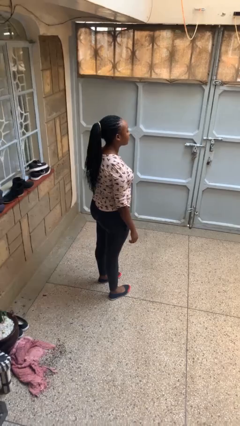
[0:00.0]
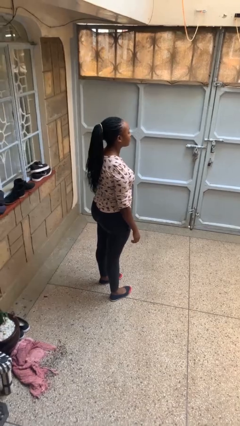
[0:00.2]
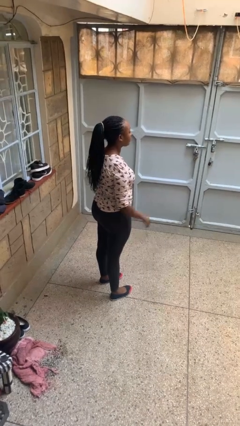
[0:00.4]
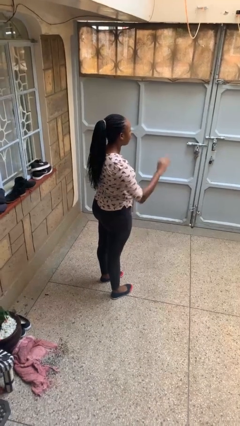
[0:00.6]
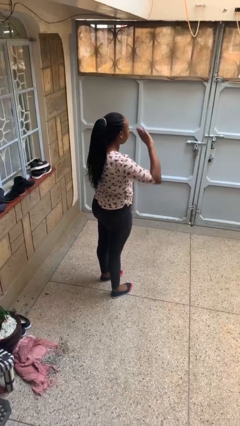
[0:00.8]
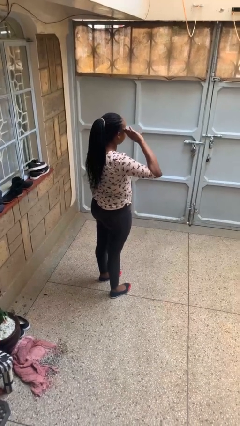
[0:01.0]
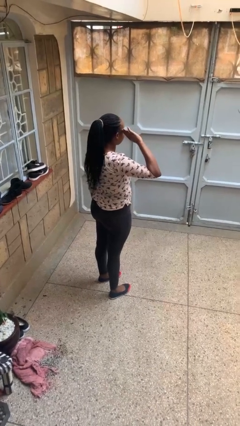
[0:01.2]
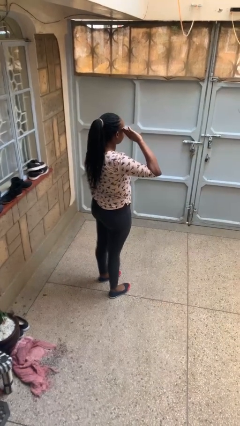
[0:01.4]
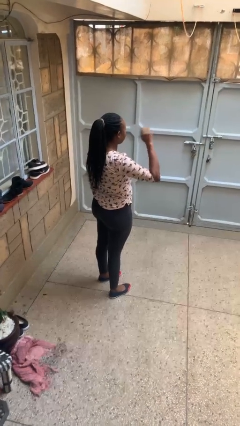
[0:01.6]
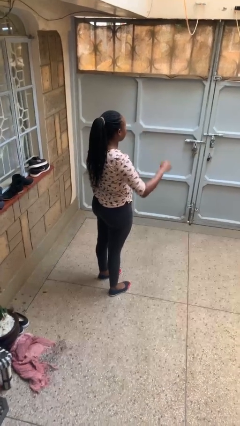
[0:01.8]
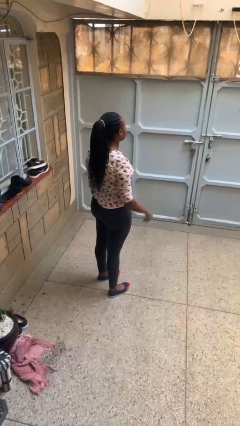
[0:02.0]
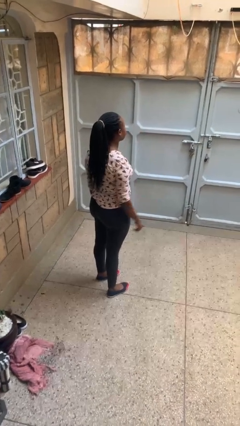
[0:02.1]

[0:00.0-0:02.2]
person salutes

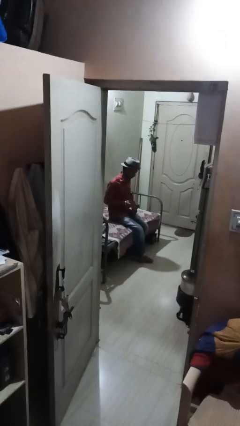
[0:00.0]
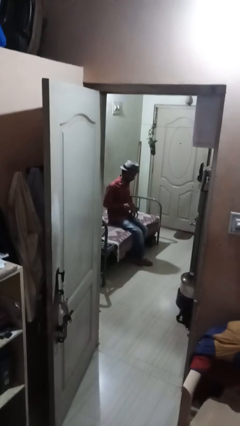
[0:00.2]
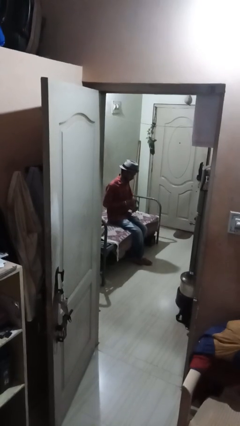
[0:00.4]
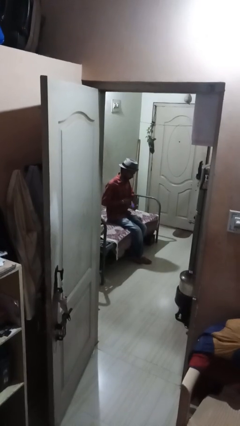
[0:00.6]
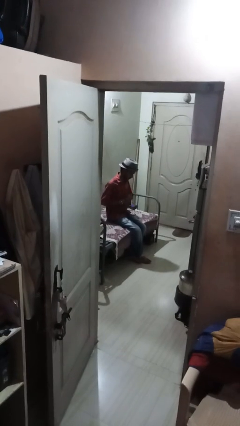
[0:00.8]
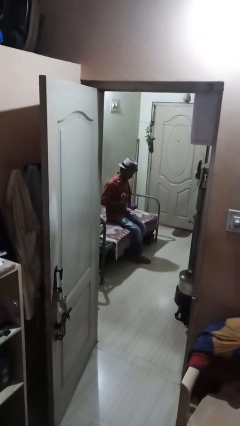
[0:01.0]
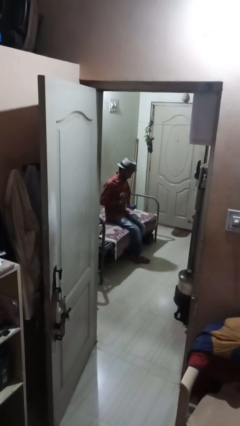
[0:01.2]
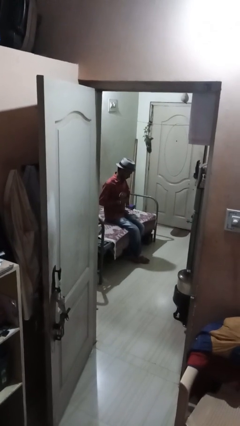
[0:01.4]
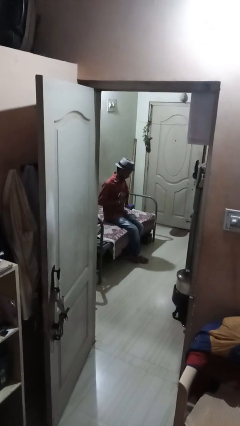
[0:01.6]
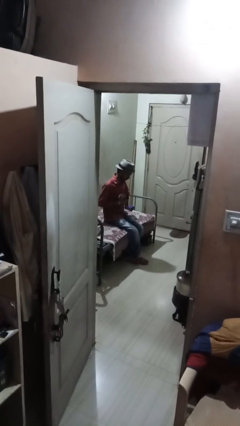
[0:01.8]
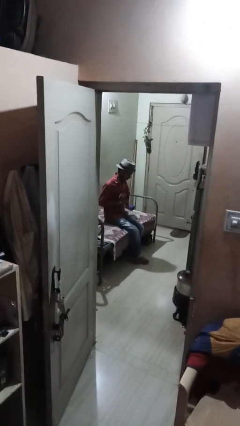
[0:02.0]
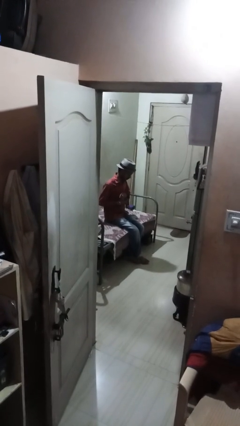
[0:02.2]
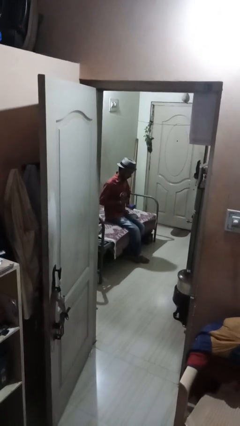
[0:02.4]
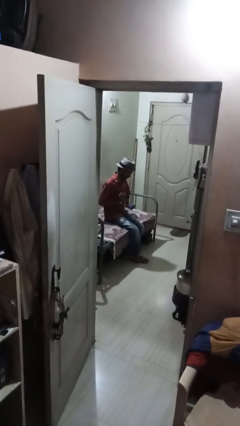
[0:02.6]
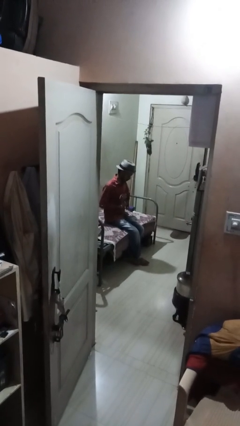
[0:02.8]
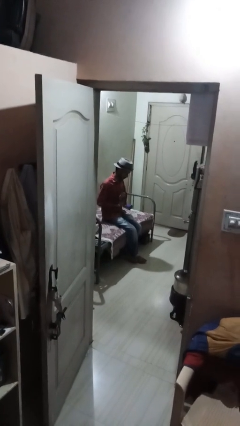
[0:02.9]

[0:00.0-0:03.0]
person puts on wristwatch

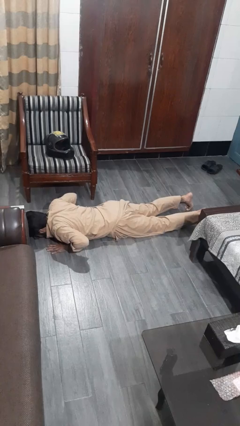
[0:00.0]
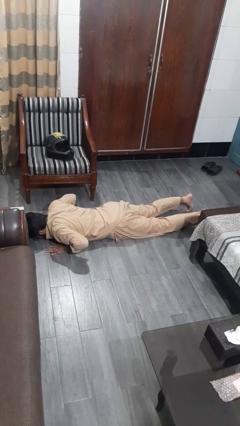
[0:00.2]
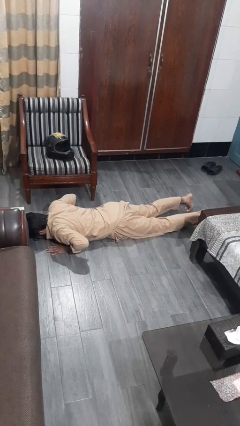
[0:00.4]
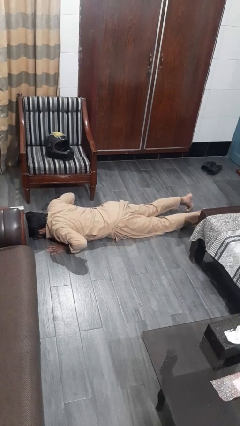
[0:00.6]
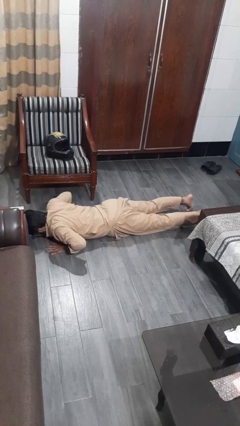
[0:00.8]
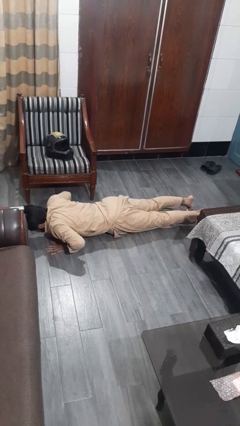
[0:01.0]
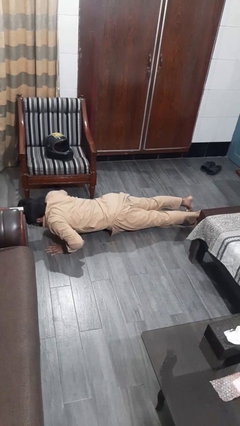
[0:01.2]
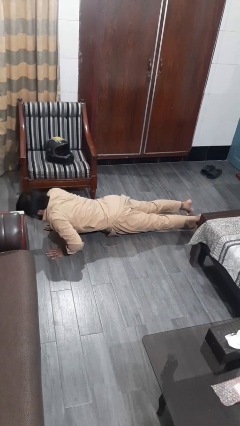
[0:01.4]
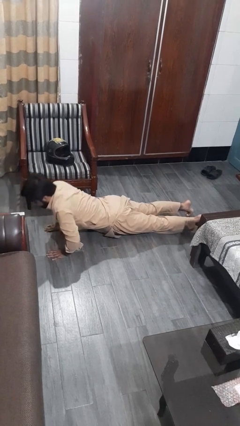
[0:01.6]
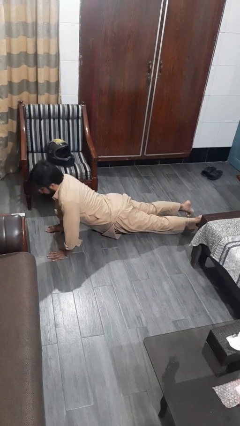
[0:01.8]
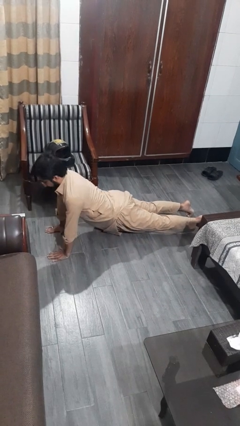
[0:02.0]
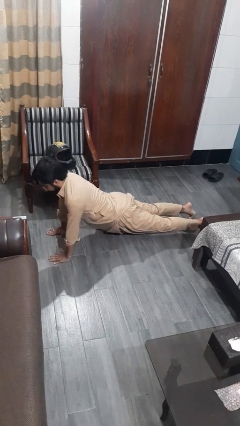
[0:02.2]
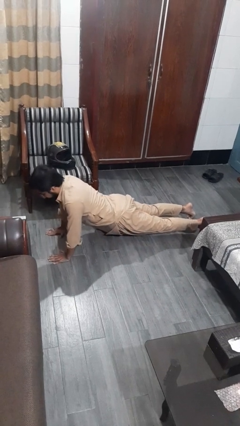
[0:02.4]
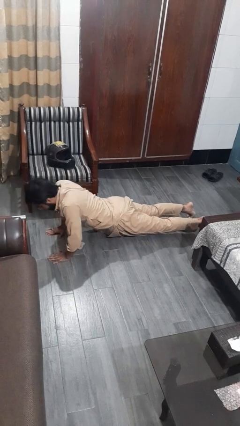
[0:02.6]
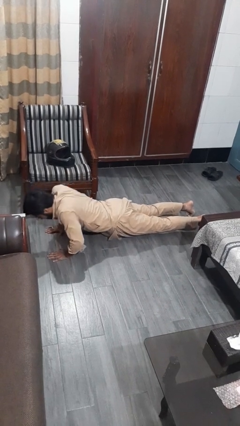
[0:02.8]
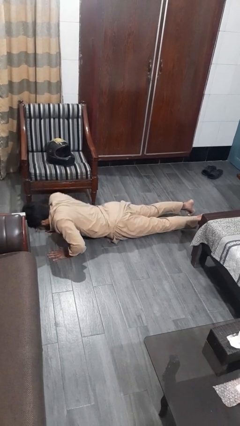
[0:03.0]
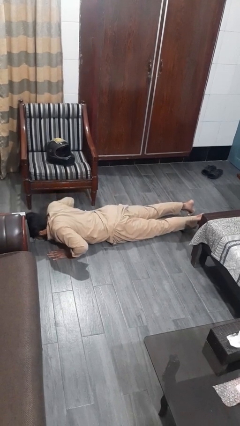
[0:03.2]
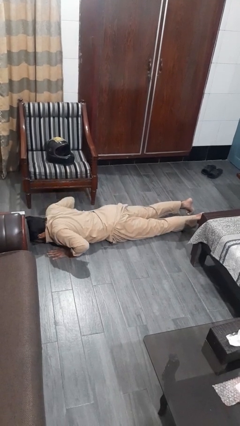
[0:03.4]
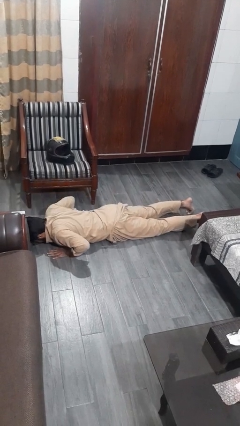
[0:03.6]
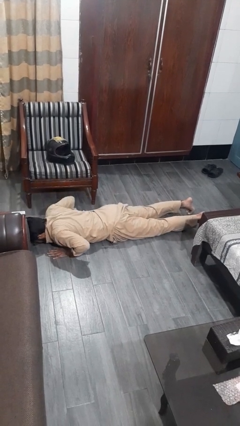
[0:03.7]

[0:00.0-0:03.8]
person exercises with pushup

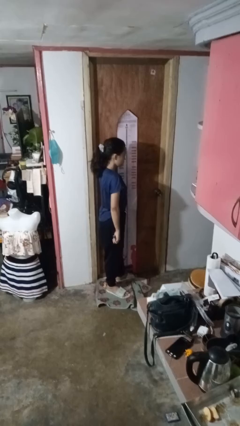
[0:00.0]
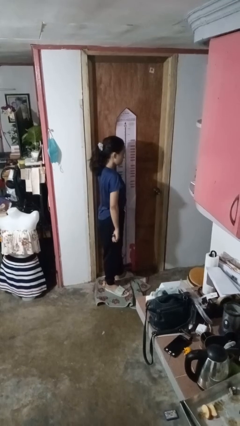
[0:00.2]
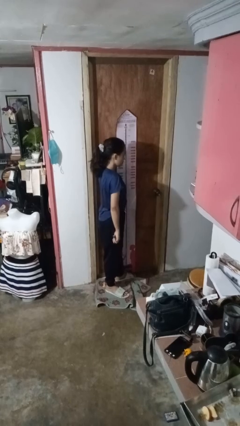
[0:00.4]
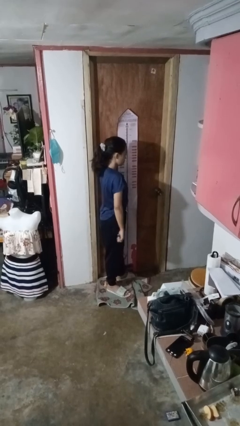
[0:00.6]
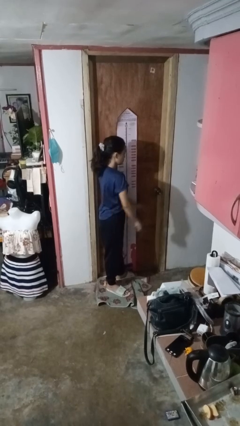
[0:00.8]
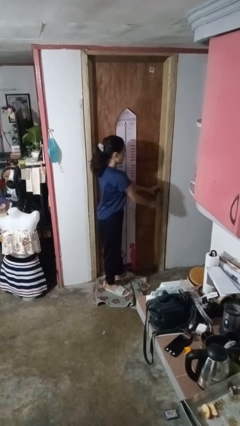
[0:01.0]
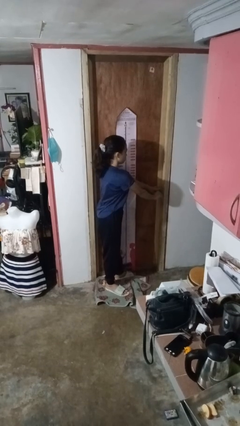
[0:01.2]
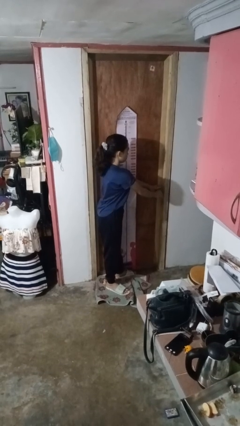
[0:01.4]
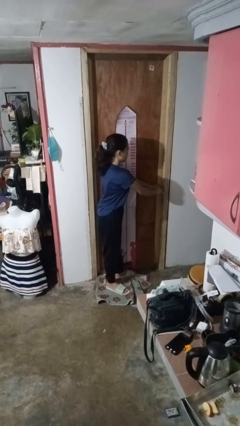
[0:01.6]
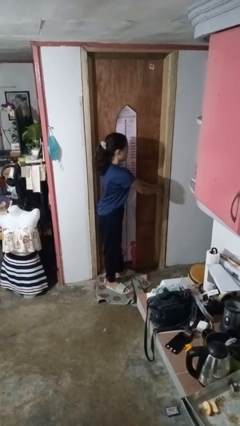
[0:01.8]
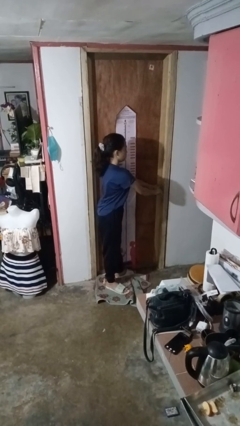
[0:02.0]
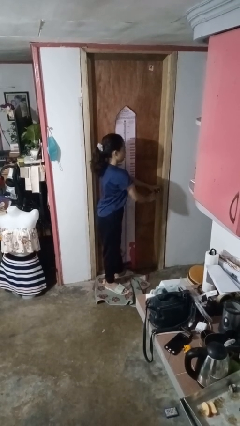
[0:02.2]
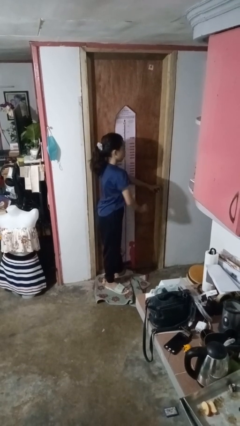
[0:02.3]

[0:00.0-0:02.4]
person unlocks door with keys

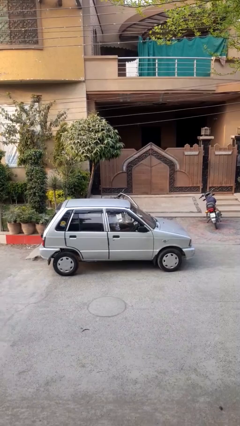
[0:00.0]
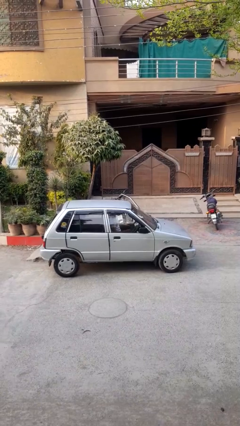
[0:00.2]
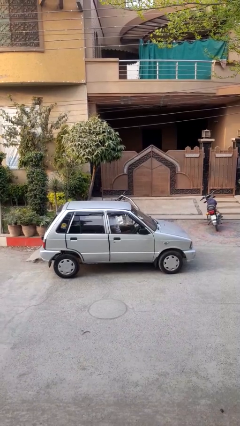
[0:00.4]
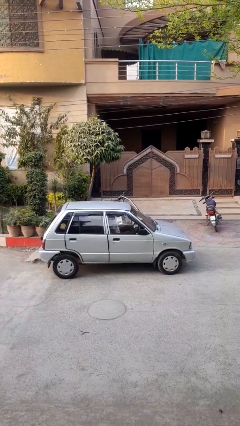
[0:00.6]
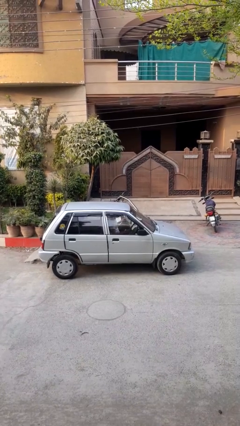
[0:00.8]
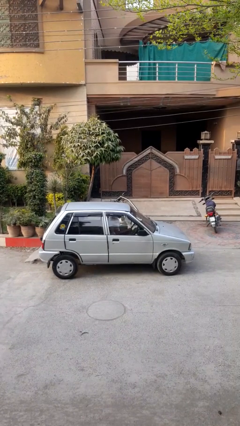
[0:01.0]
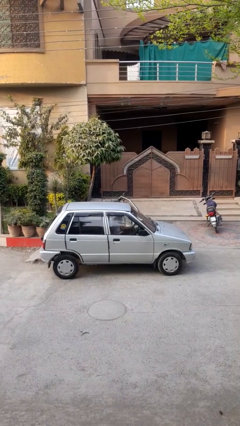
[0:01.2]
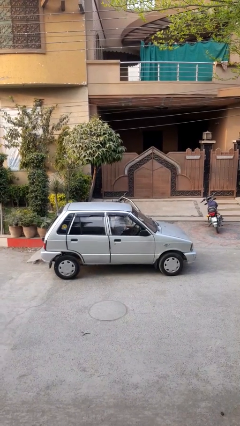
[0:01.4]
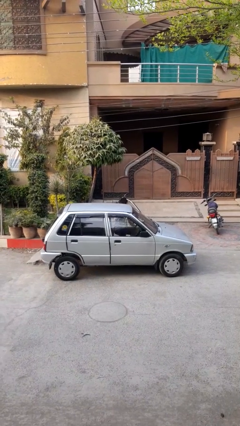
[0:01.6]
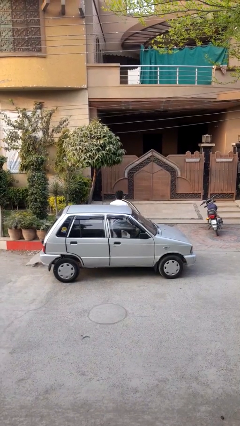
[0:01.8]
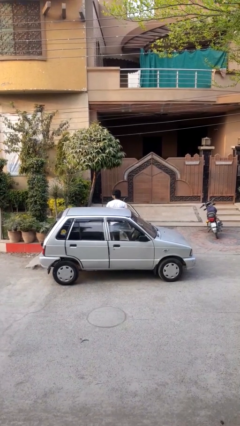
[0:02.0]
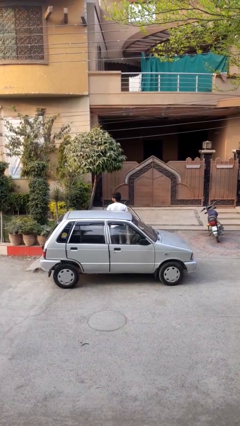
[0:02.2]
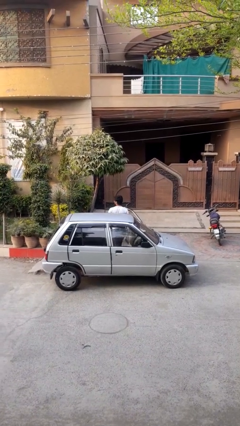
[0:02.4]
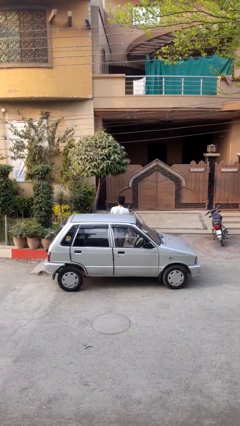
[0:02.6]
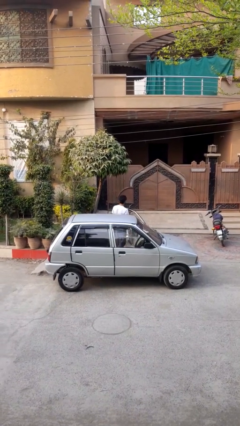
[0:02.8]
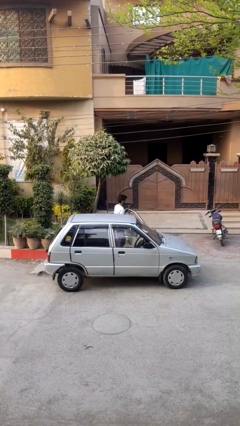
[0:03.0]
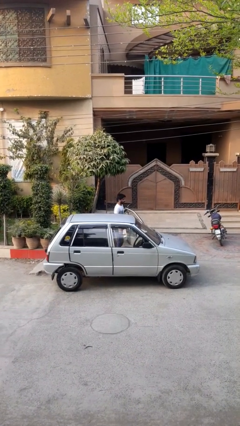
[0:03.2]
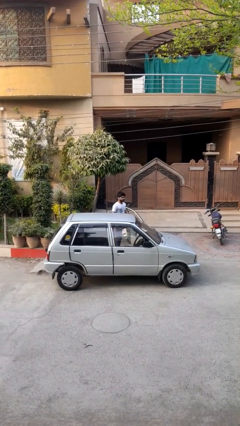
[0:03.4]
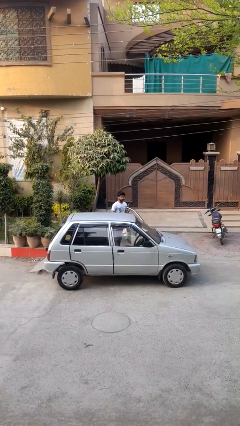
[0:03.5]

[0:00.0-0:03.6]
person exits car

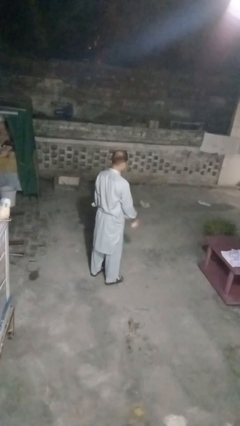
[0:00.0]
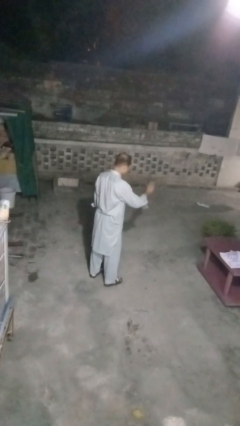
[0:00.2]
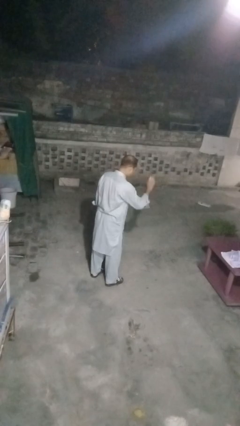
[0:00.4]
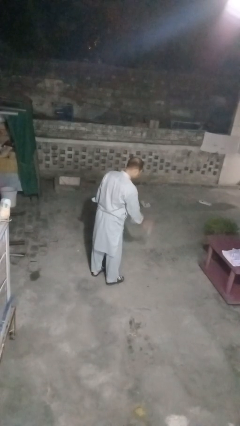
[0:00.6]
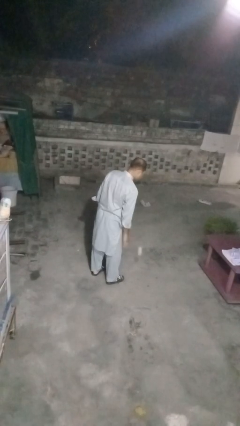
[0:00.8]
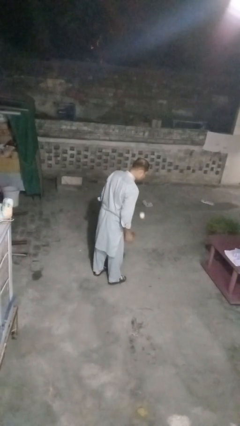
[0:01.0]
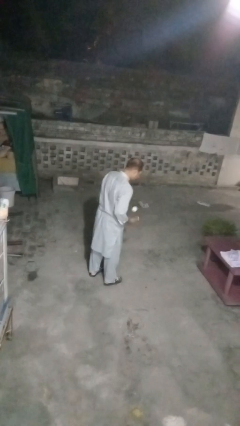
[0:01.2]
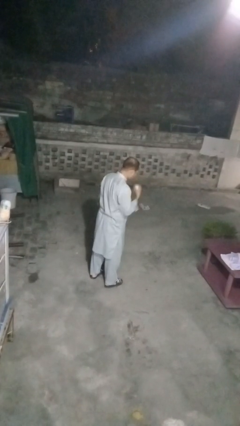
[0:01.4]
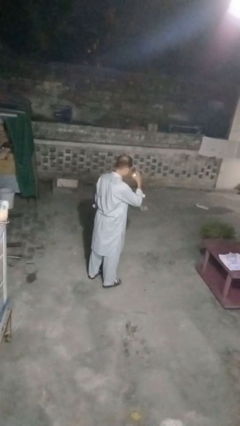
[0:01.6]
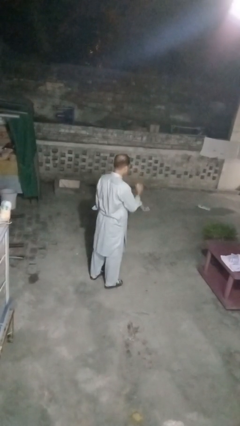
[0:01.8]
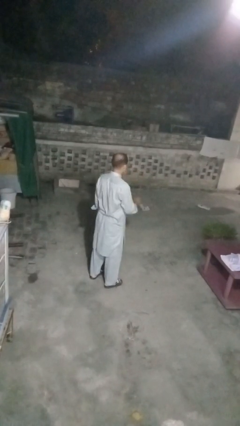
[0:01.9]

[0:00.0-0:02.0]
person bounces ball on floor

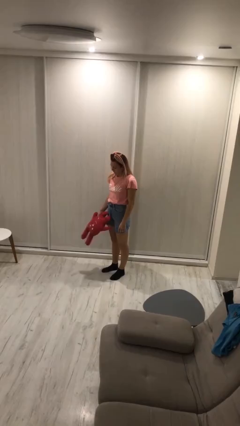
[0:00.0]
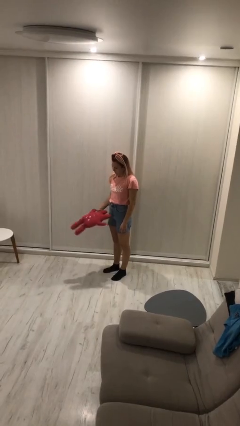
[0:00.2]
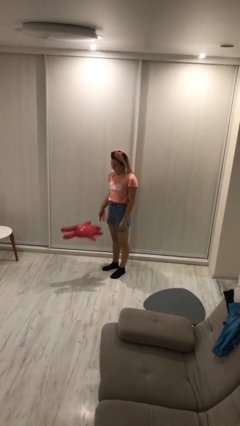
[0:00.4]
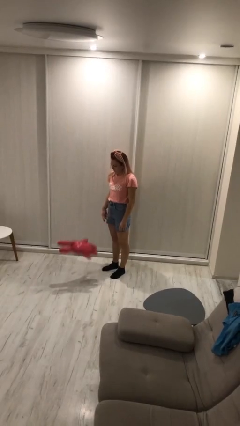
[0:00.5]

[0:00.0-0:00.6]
person throws object to ground
